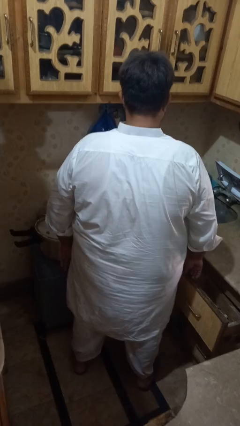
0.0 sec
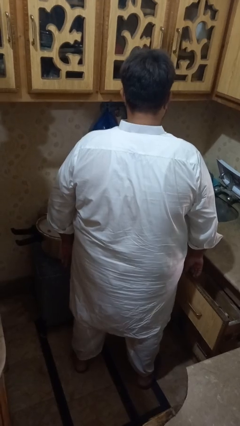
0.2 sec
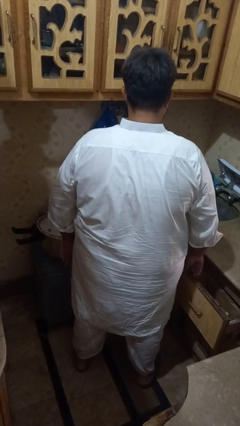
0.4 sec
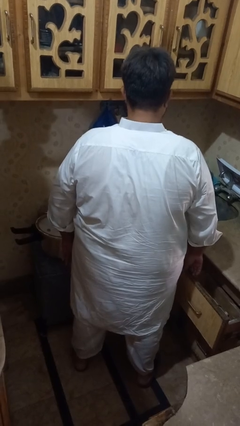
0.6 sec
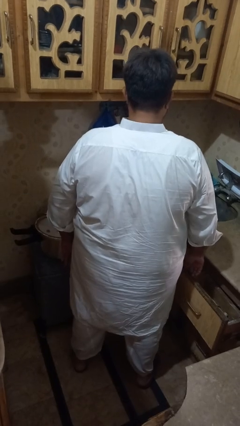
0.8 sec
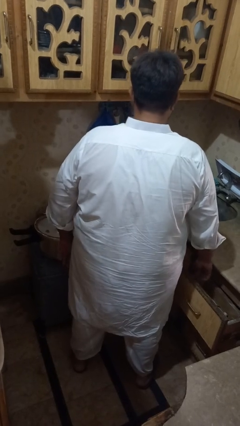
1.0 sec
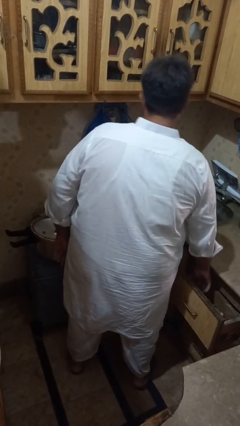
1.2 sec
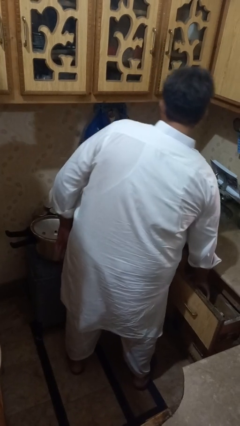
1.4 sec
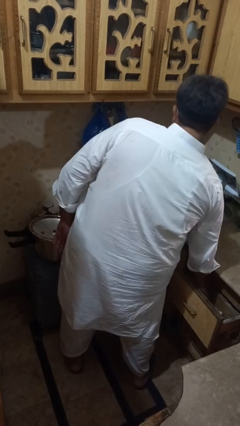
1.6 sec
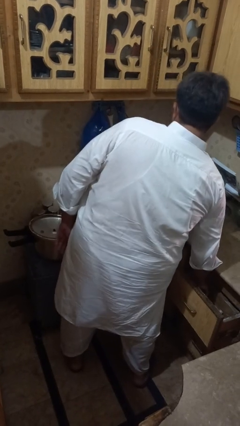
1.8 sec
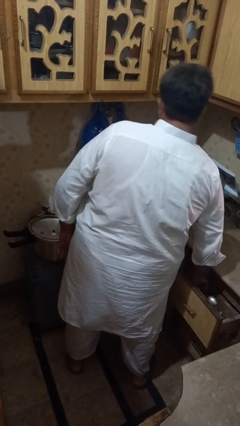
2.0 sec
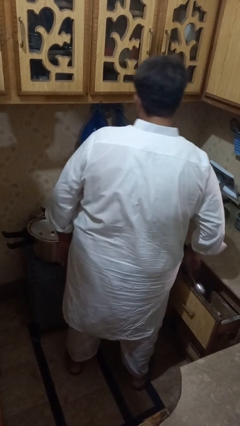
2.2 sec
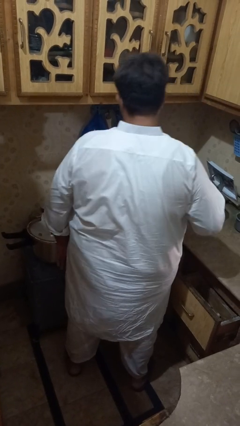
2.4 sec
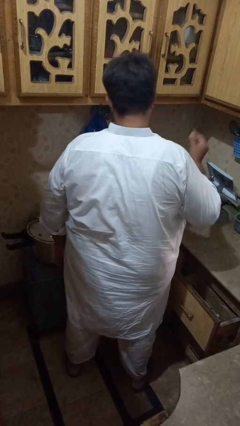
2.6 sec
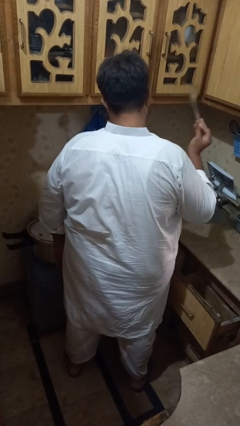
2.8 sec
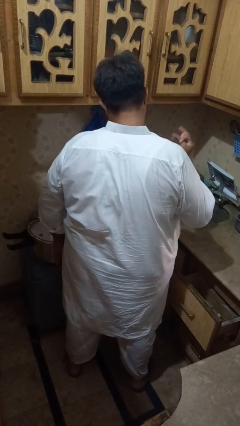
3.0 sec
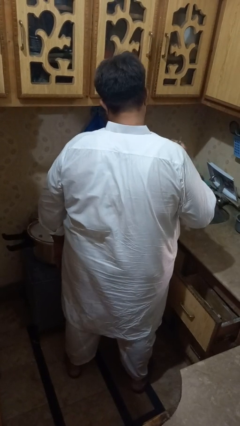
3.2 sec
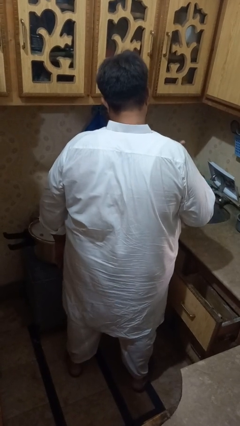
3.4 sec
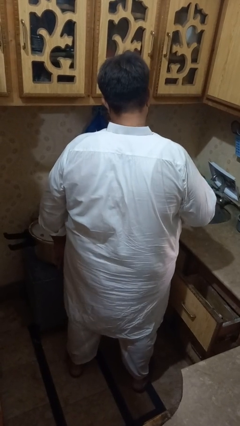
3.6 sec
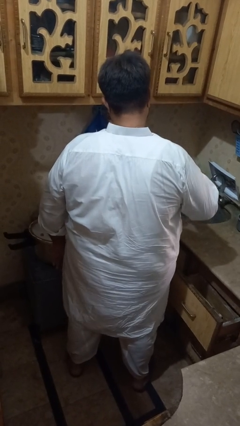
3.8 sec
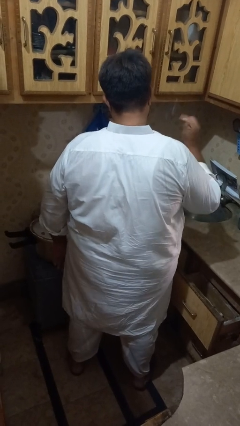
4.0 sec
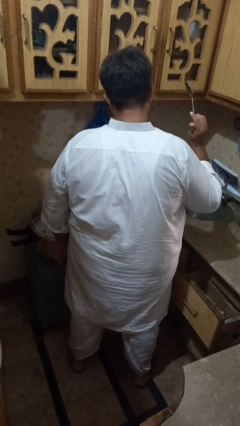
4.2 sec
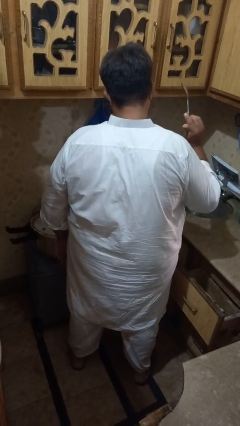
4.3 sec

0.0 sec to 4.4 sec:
person takes object from kitchen drawer

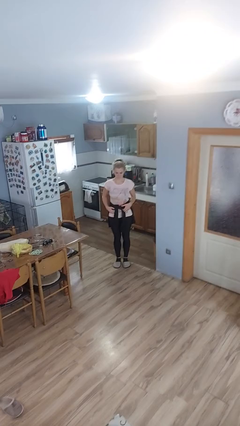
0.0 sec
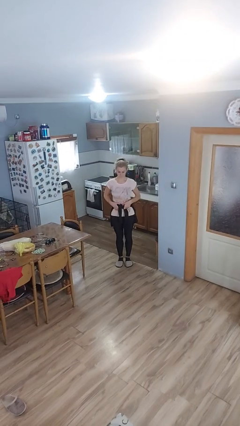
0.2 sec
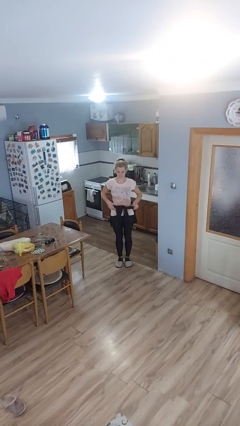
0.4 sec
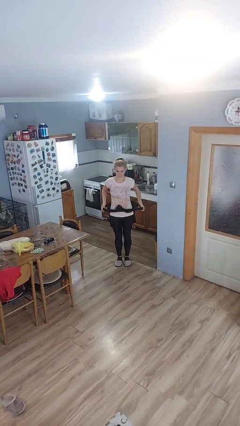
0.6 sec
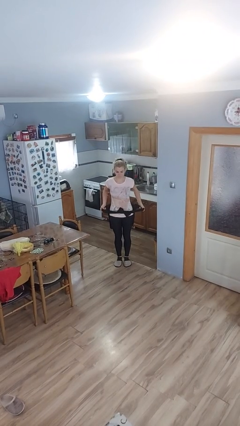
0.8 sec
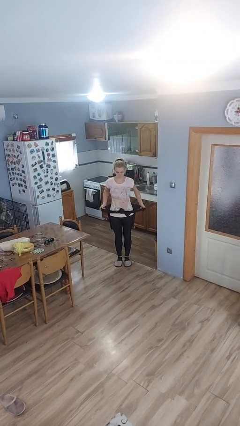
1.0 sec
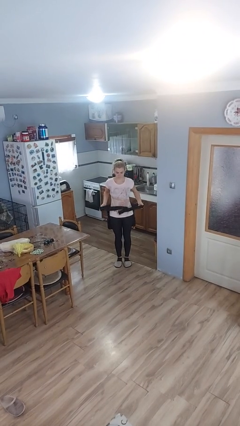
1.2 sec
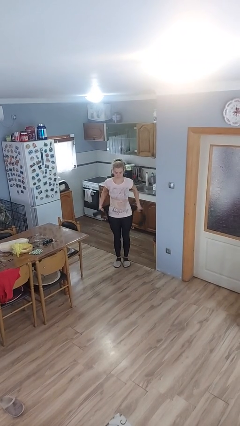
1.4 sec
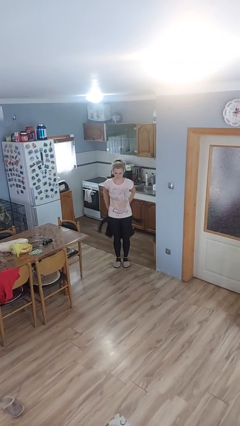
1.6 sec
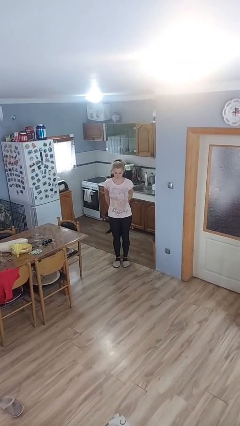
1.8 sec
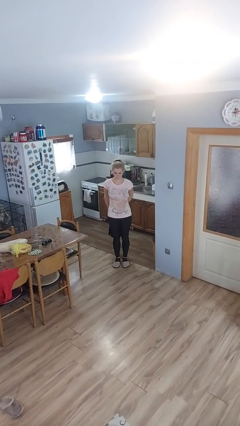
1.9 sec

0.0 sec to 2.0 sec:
person unties jacket around waist

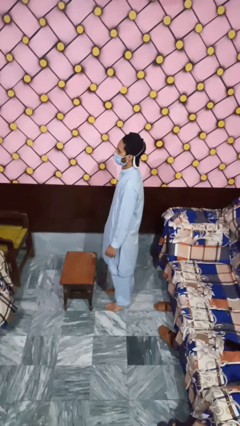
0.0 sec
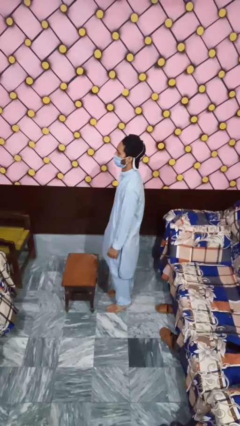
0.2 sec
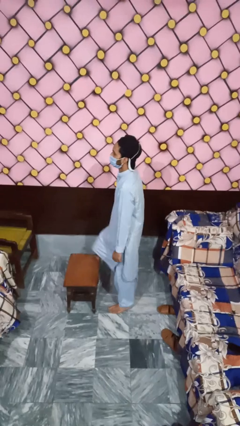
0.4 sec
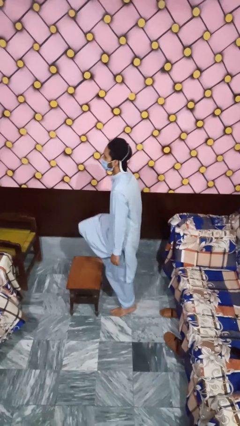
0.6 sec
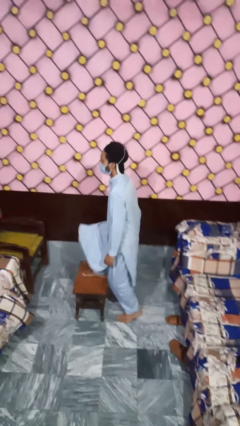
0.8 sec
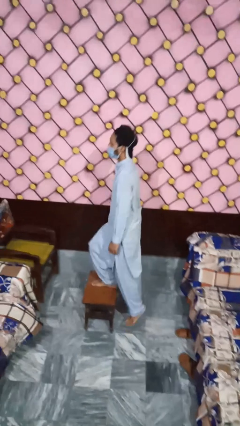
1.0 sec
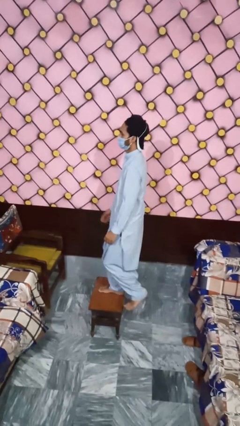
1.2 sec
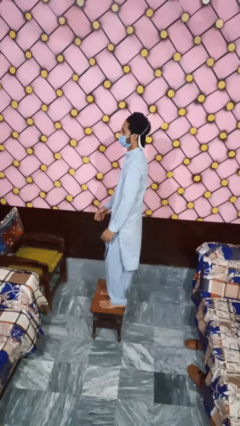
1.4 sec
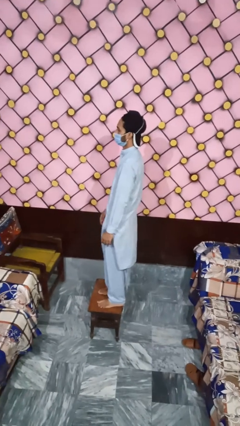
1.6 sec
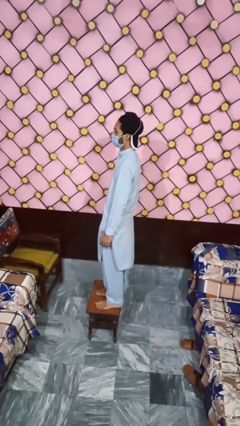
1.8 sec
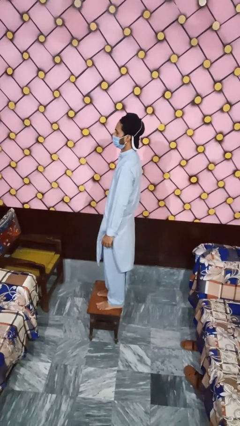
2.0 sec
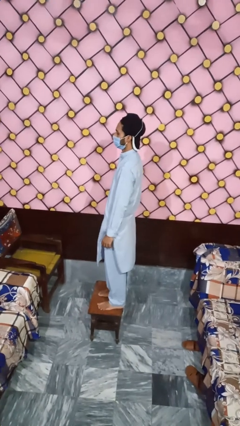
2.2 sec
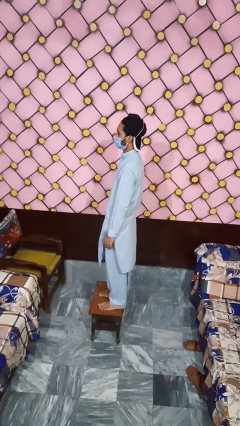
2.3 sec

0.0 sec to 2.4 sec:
person climbs on table

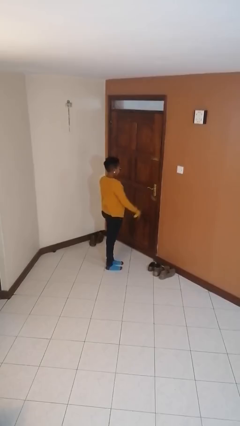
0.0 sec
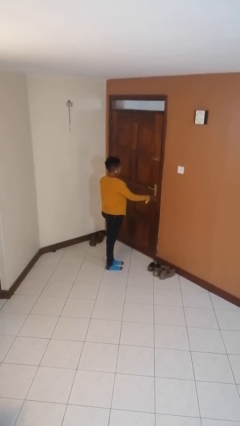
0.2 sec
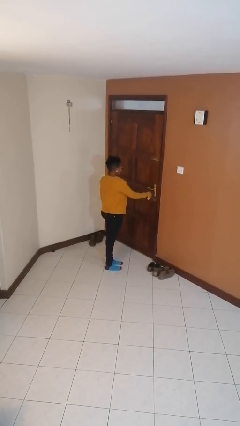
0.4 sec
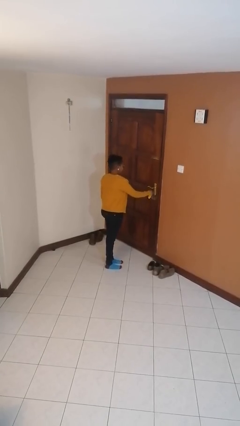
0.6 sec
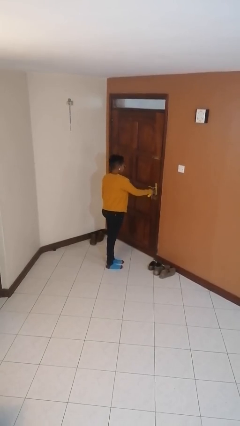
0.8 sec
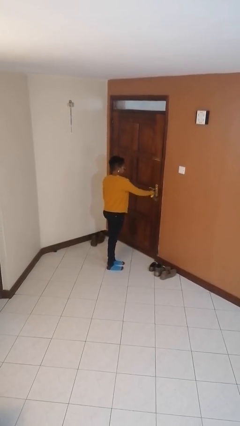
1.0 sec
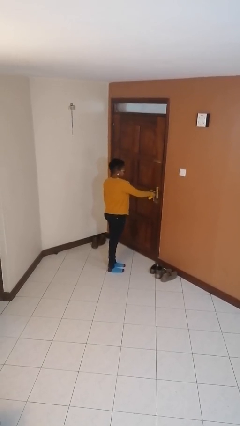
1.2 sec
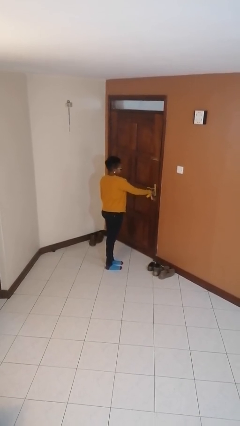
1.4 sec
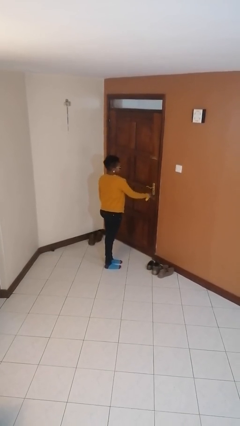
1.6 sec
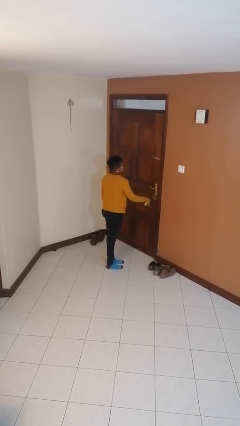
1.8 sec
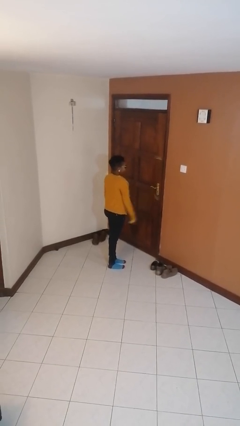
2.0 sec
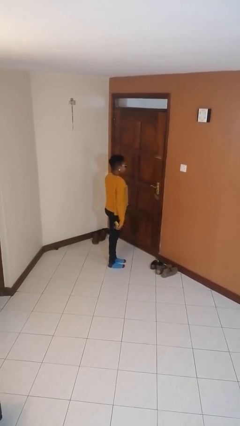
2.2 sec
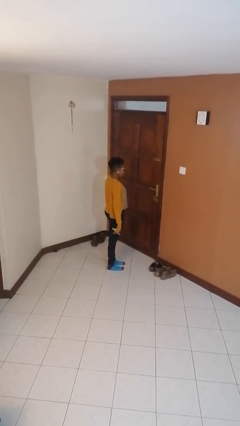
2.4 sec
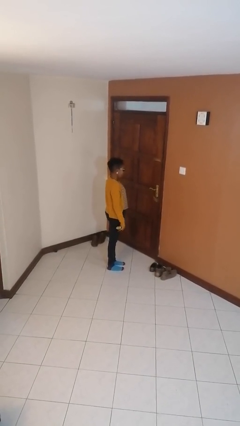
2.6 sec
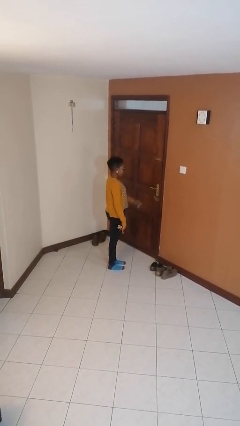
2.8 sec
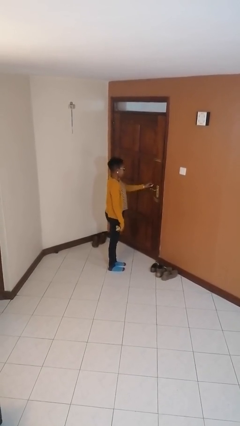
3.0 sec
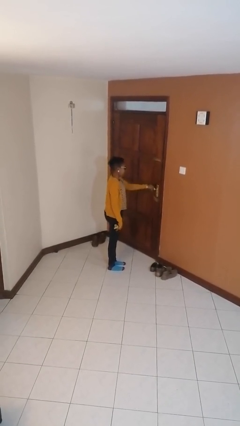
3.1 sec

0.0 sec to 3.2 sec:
person unlocks door with keys

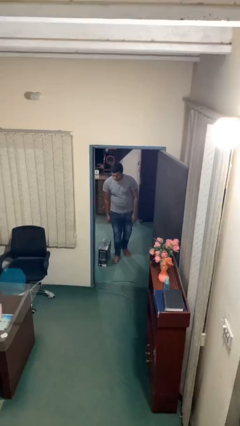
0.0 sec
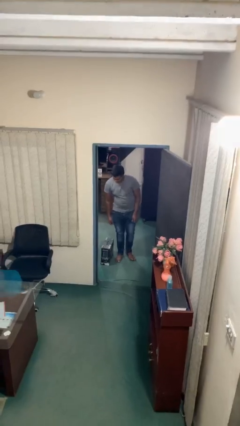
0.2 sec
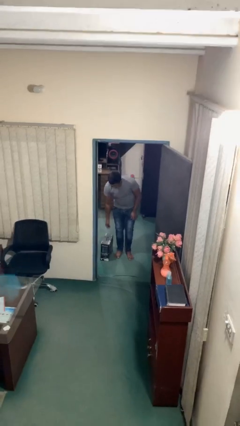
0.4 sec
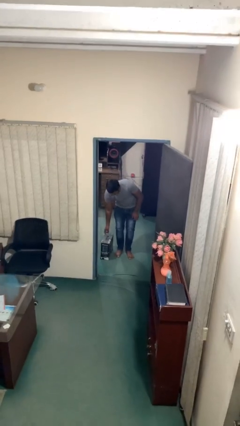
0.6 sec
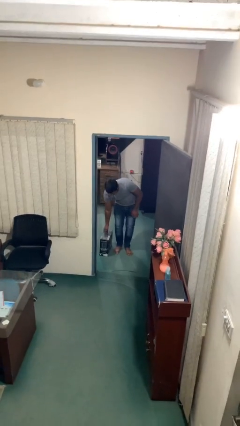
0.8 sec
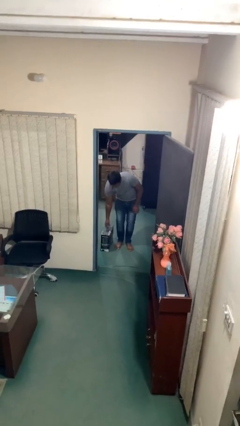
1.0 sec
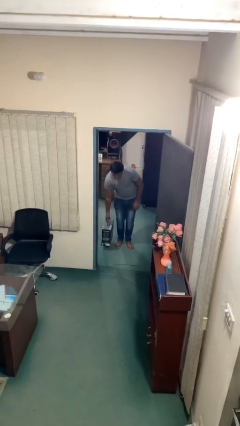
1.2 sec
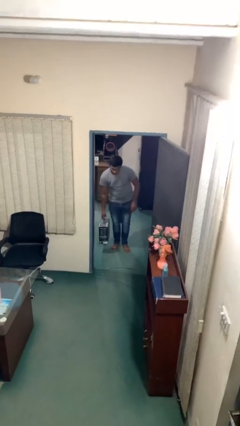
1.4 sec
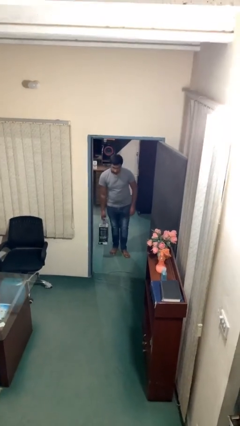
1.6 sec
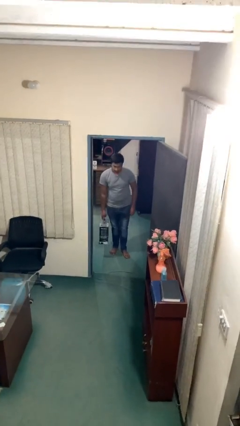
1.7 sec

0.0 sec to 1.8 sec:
person picks up object from floor

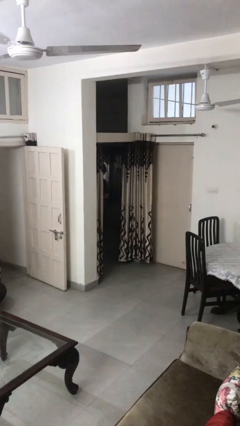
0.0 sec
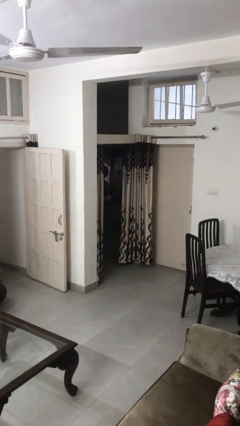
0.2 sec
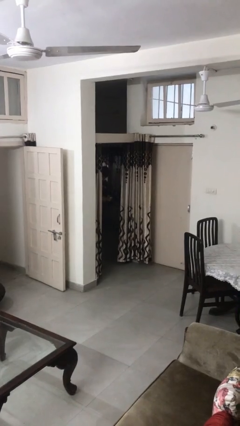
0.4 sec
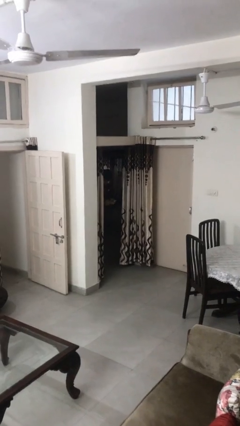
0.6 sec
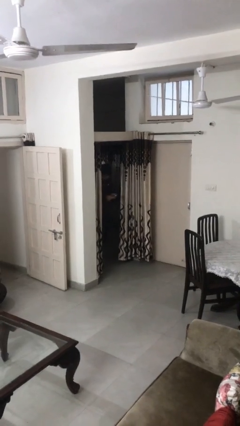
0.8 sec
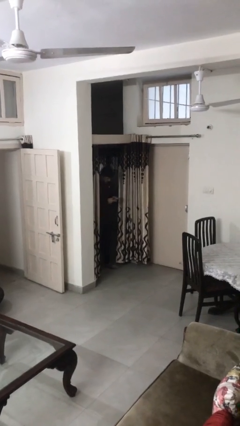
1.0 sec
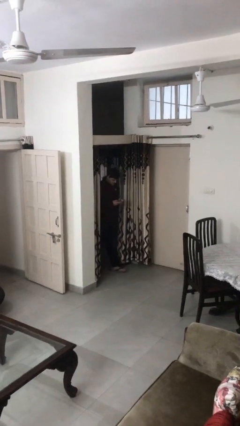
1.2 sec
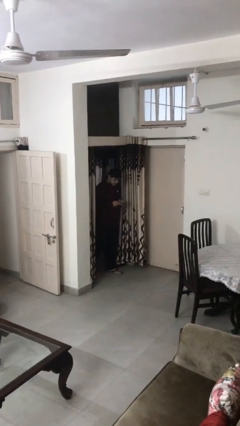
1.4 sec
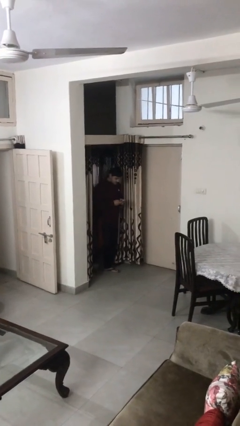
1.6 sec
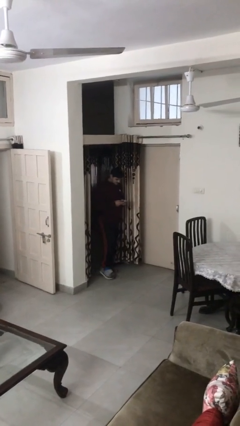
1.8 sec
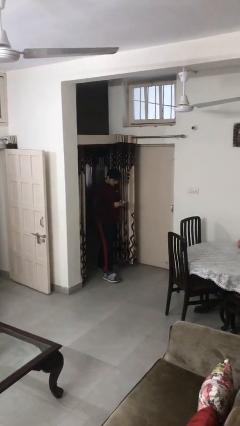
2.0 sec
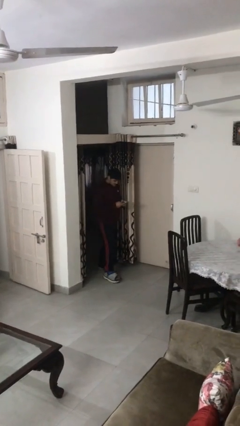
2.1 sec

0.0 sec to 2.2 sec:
person enters scene through structure

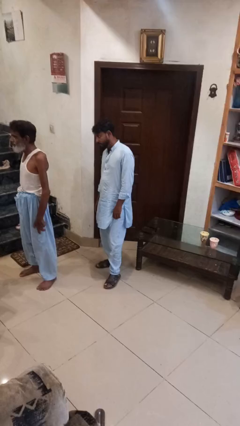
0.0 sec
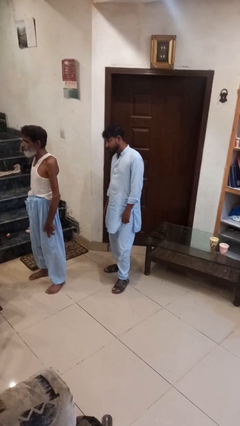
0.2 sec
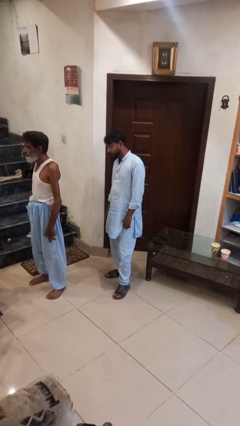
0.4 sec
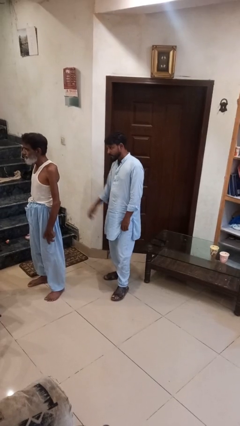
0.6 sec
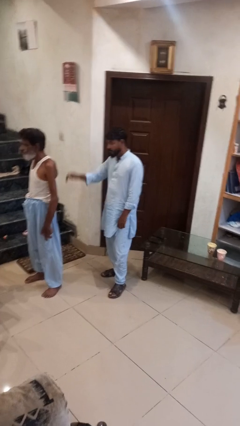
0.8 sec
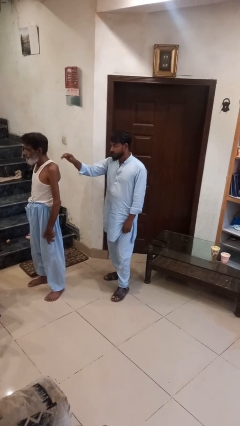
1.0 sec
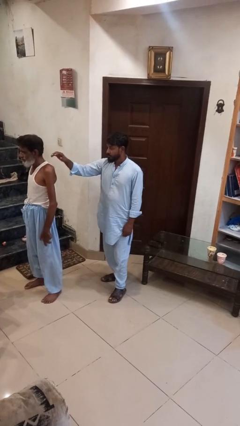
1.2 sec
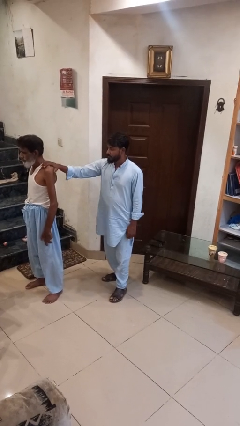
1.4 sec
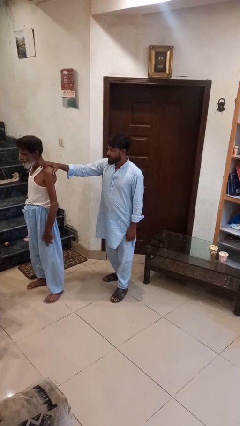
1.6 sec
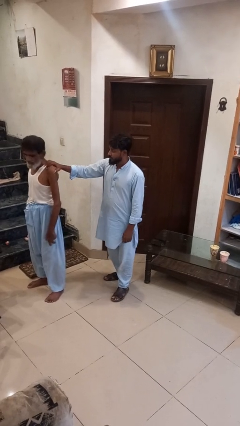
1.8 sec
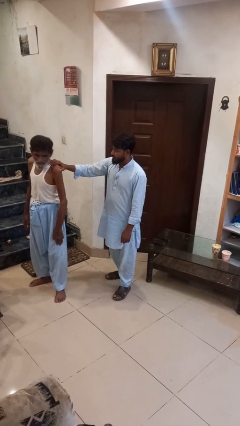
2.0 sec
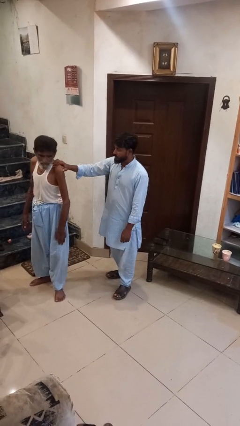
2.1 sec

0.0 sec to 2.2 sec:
person grabs person by shoulder
